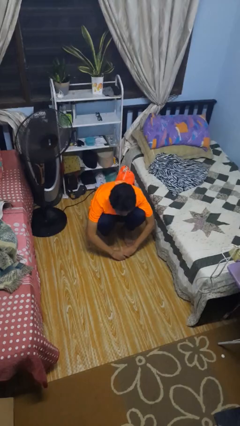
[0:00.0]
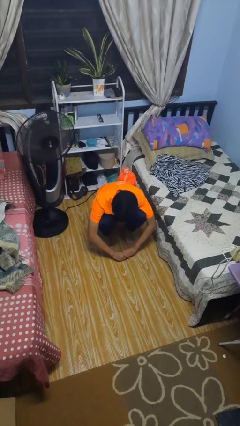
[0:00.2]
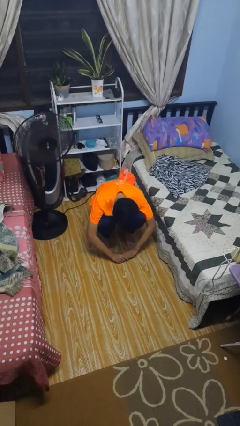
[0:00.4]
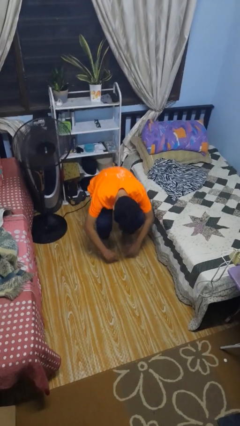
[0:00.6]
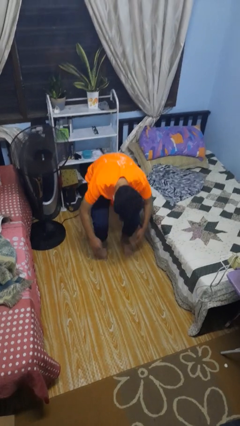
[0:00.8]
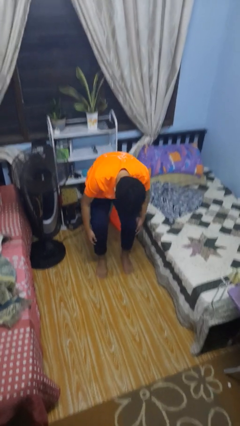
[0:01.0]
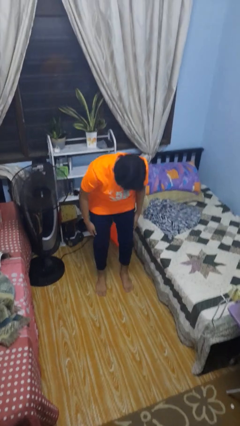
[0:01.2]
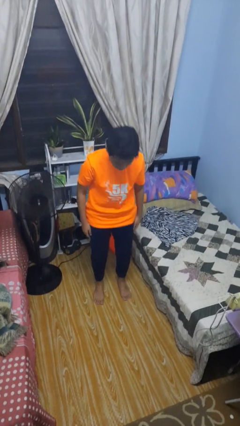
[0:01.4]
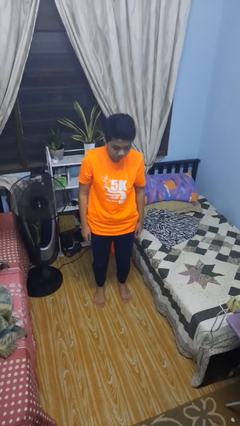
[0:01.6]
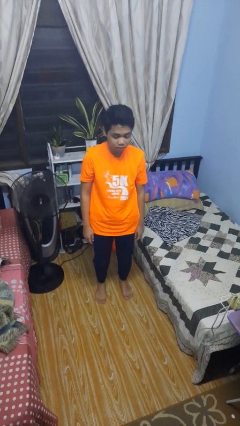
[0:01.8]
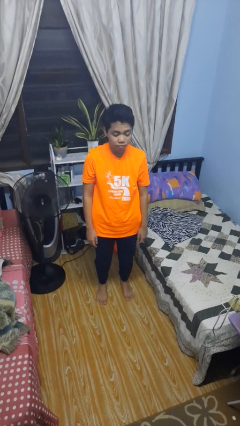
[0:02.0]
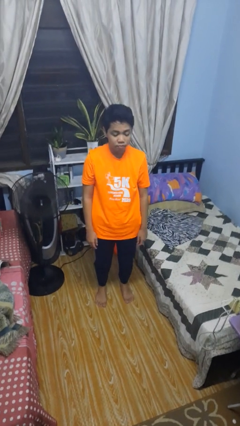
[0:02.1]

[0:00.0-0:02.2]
person stands up

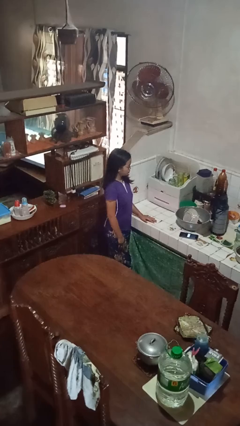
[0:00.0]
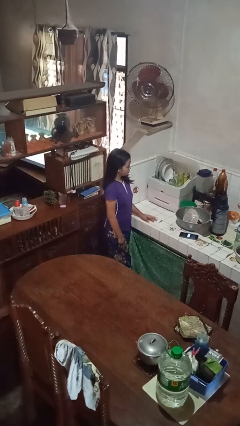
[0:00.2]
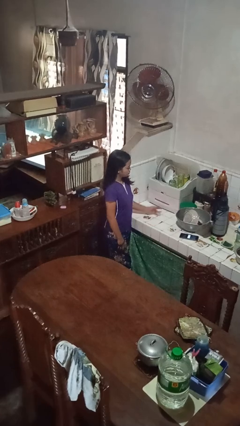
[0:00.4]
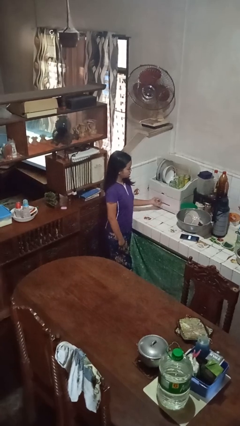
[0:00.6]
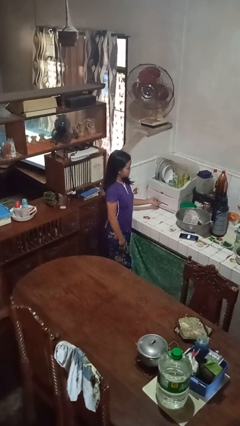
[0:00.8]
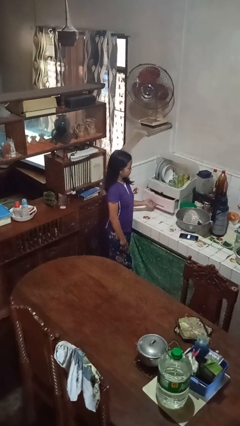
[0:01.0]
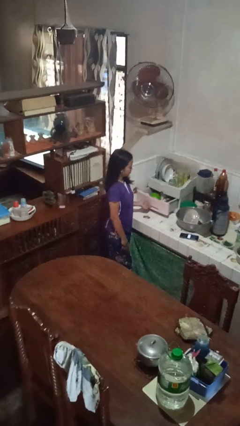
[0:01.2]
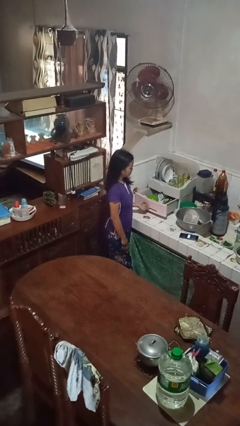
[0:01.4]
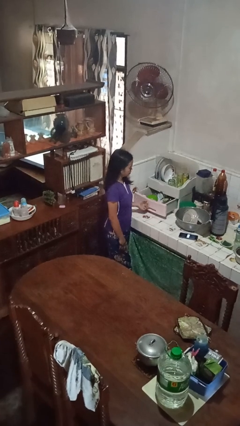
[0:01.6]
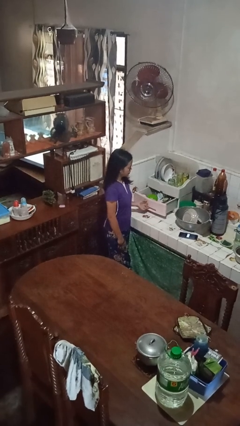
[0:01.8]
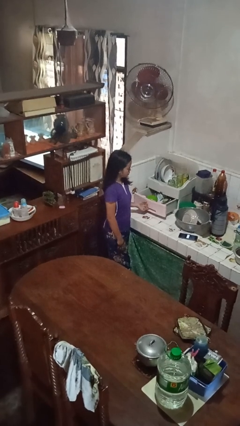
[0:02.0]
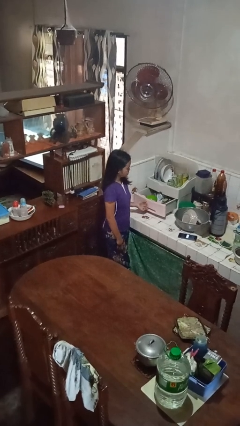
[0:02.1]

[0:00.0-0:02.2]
person opens kitchen drawer

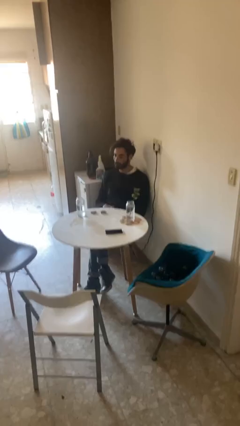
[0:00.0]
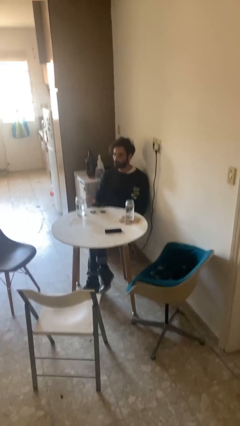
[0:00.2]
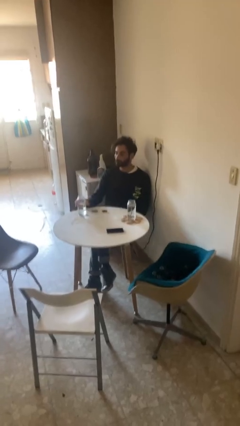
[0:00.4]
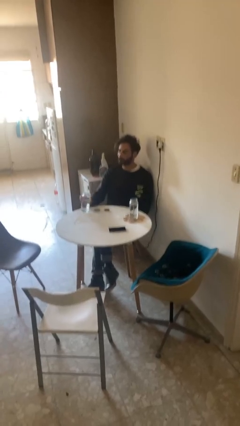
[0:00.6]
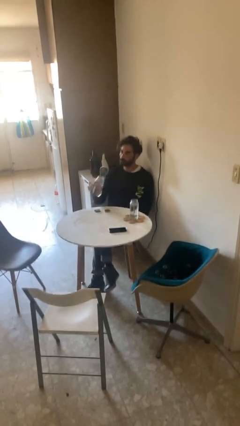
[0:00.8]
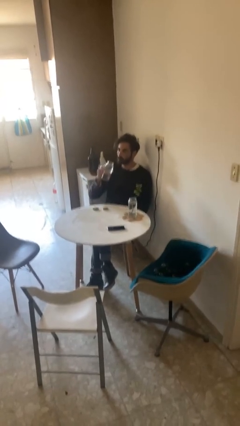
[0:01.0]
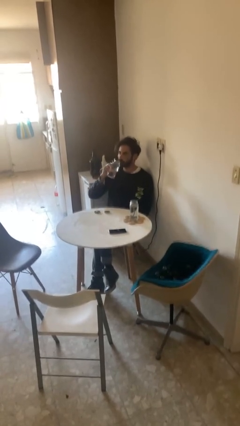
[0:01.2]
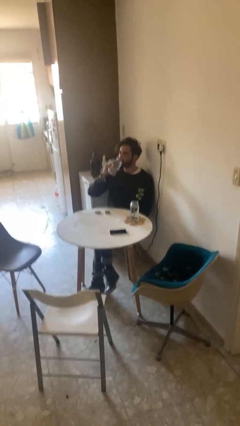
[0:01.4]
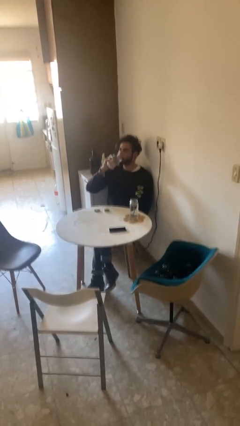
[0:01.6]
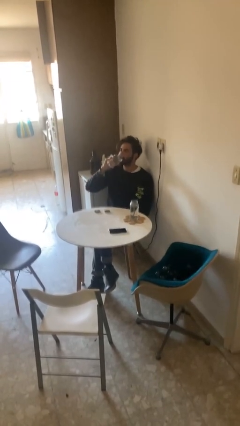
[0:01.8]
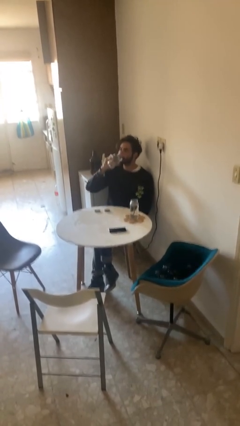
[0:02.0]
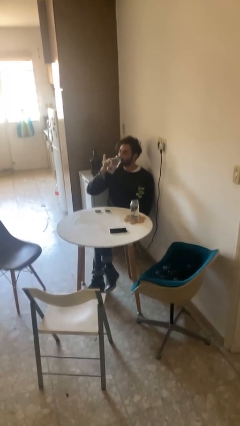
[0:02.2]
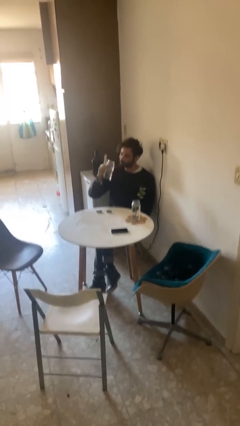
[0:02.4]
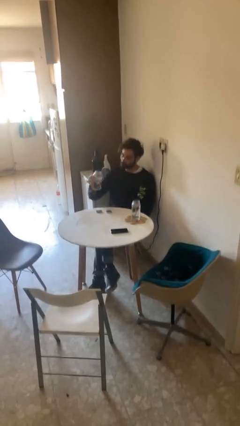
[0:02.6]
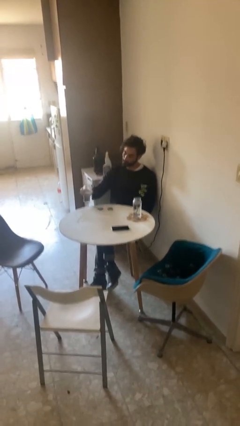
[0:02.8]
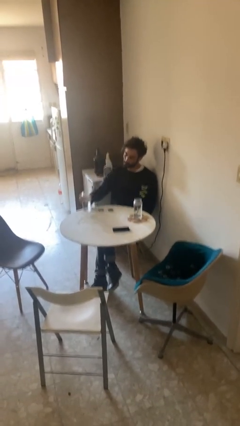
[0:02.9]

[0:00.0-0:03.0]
person drinks from cup

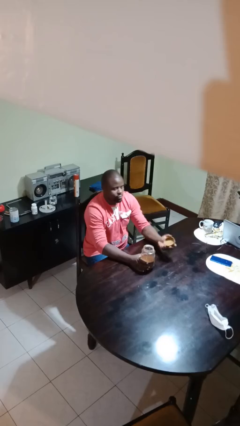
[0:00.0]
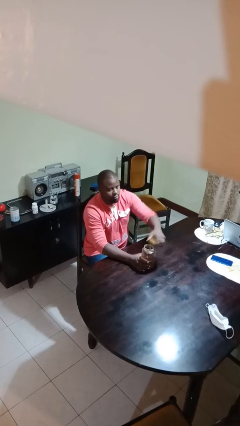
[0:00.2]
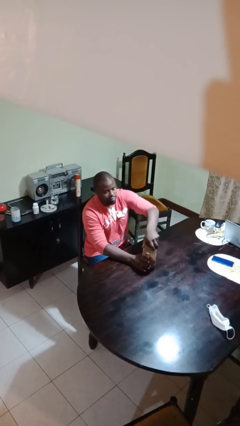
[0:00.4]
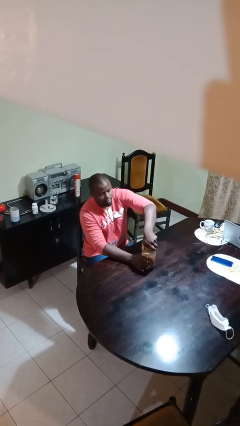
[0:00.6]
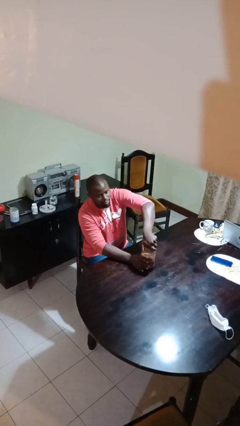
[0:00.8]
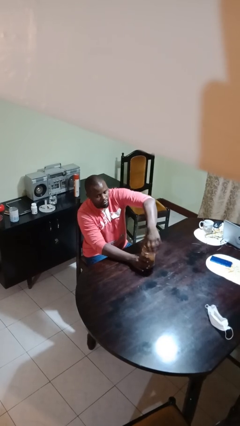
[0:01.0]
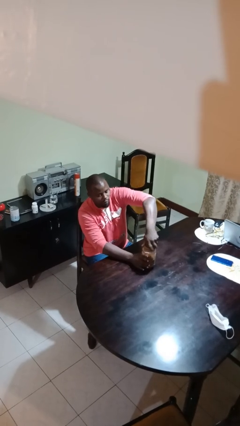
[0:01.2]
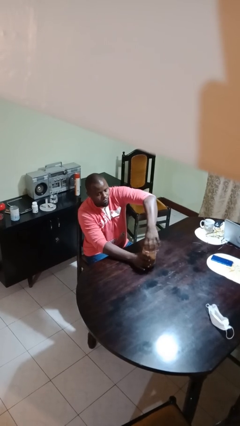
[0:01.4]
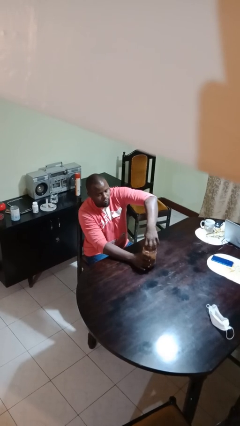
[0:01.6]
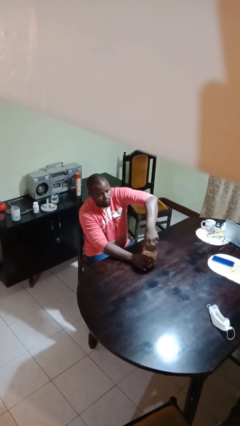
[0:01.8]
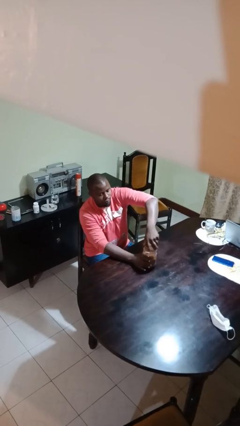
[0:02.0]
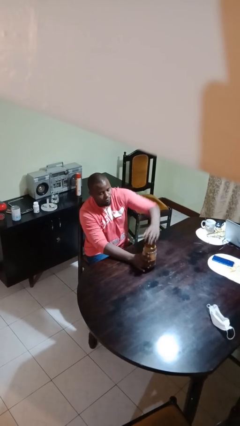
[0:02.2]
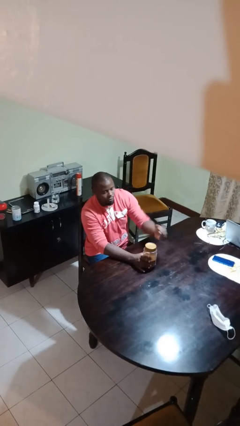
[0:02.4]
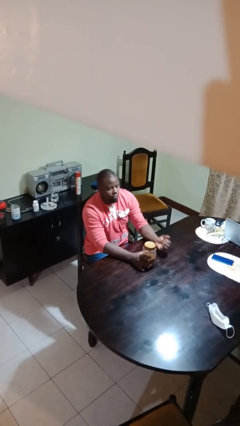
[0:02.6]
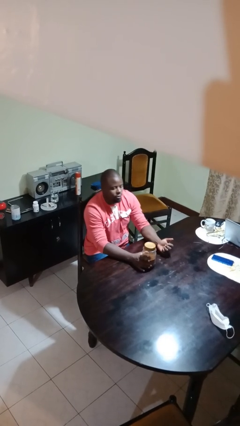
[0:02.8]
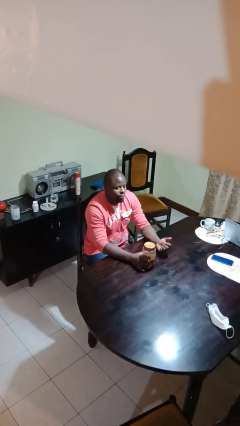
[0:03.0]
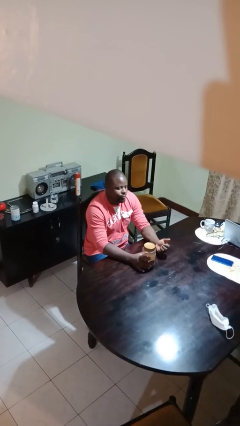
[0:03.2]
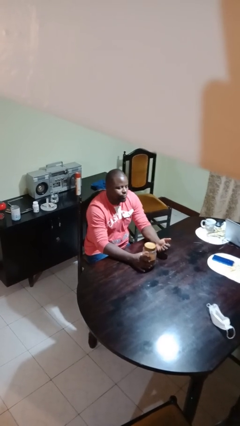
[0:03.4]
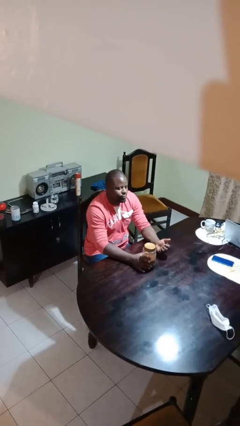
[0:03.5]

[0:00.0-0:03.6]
person closes jar

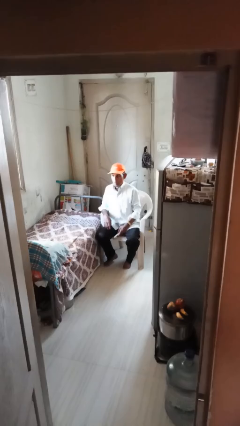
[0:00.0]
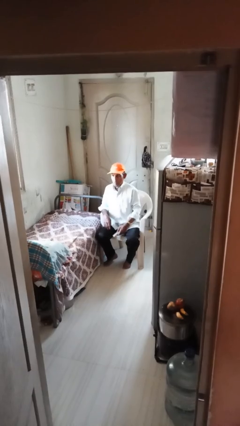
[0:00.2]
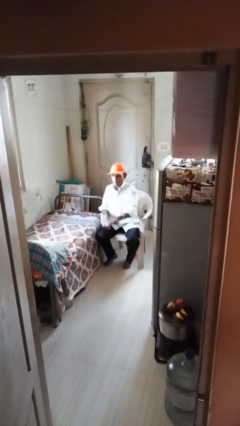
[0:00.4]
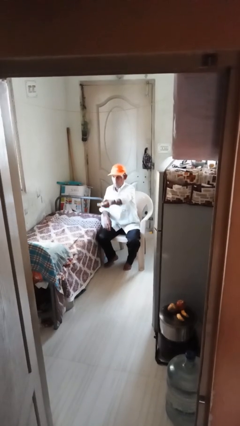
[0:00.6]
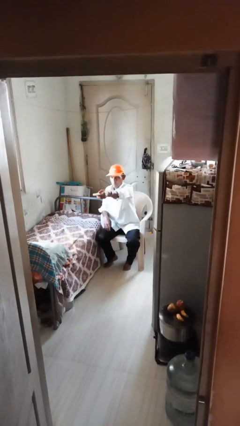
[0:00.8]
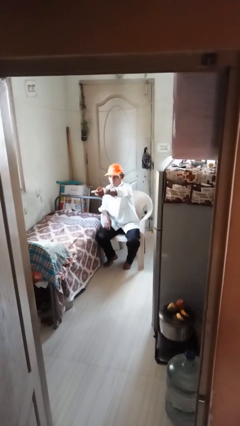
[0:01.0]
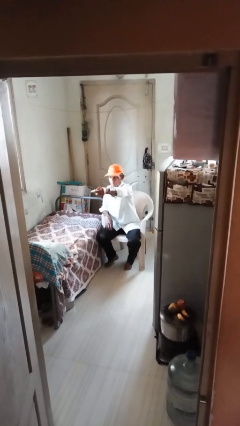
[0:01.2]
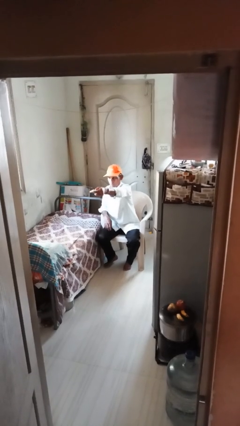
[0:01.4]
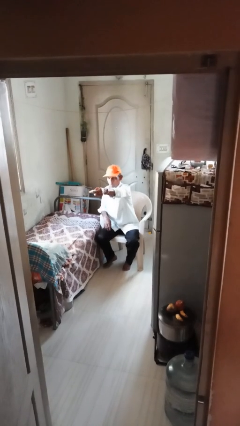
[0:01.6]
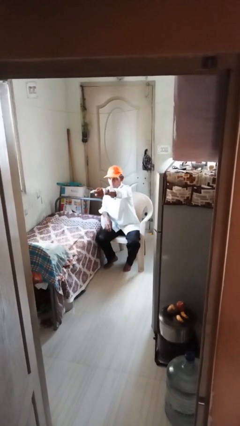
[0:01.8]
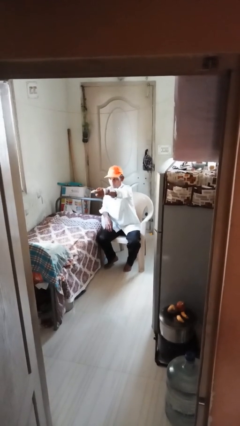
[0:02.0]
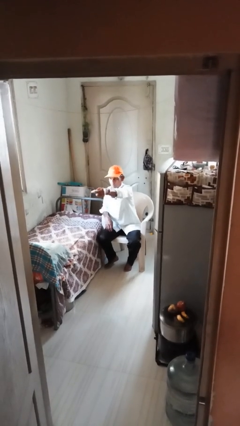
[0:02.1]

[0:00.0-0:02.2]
person uses television remote

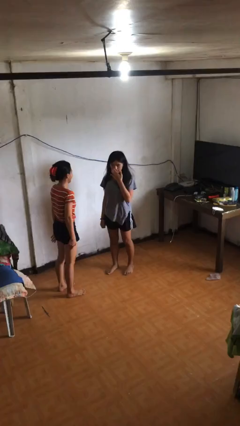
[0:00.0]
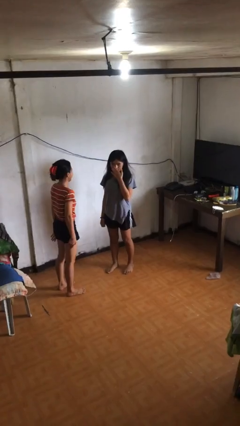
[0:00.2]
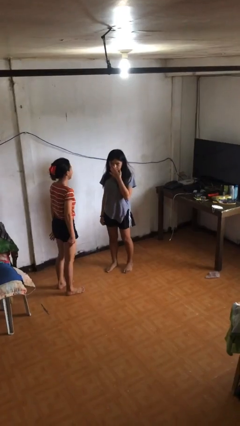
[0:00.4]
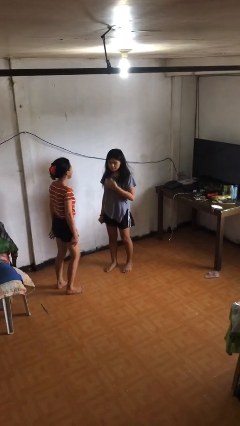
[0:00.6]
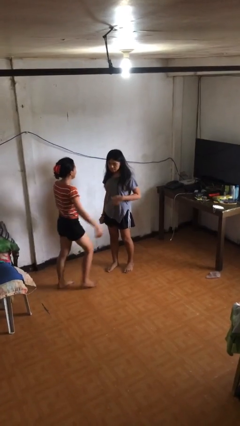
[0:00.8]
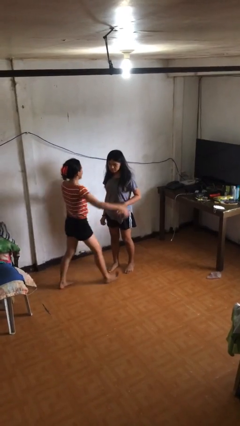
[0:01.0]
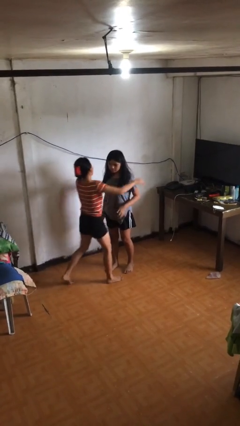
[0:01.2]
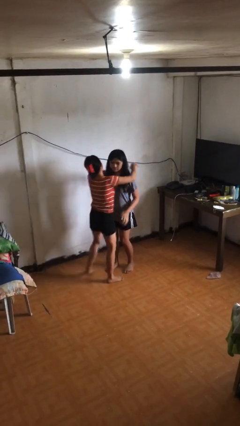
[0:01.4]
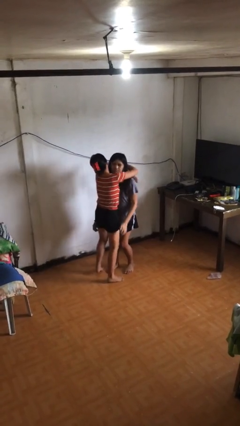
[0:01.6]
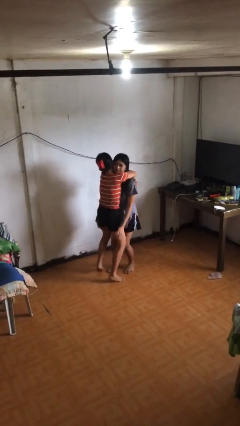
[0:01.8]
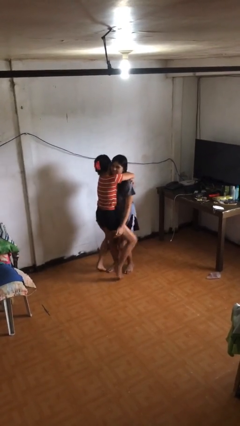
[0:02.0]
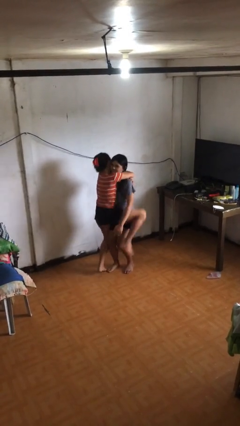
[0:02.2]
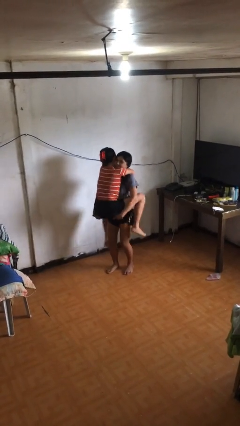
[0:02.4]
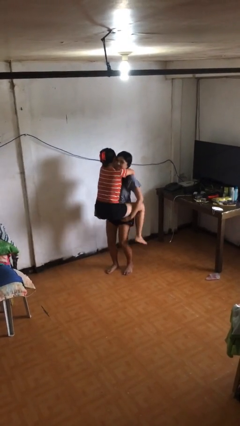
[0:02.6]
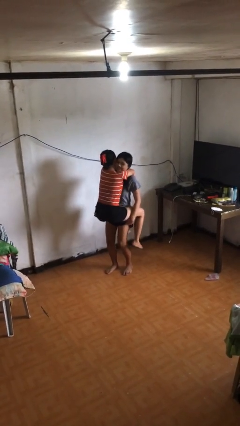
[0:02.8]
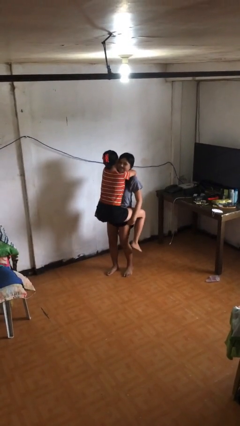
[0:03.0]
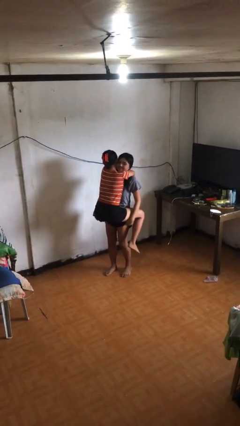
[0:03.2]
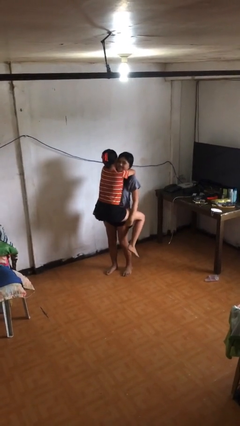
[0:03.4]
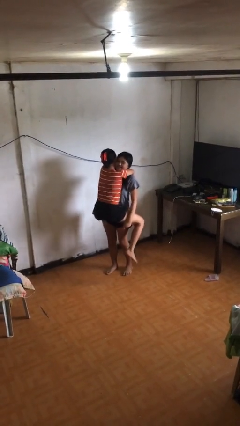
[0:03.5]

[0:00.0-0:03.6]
person picks up person

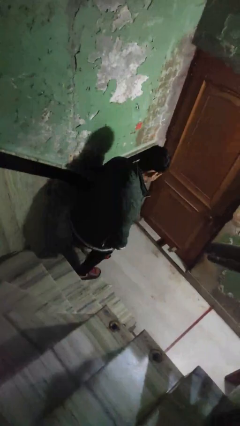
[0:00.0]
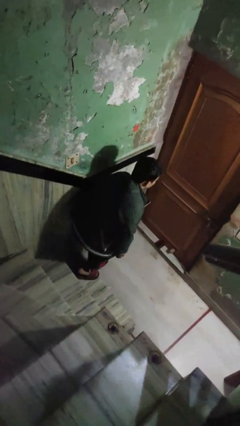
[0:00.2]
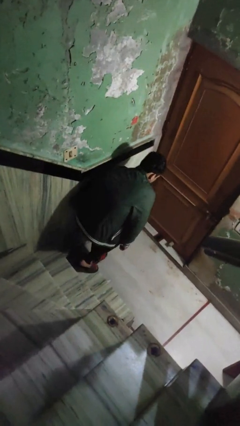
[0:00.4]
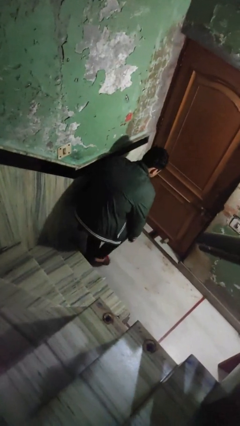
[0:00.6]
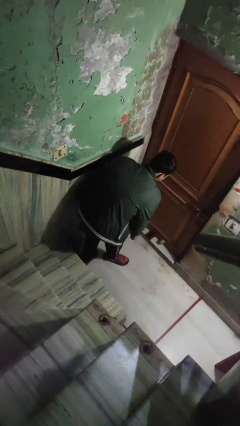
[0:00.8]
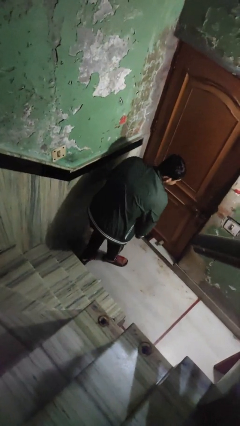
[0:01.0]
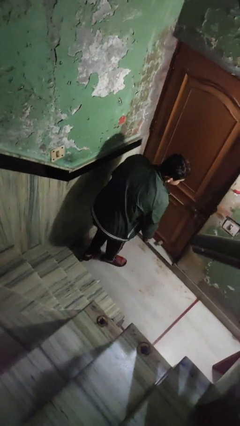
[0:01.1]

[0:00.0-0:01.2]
person trips on stair
